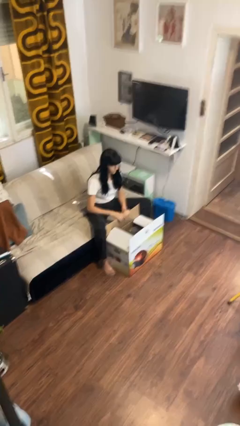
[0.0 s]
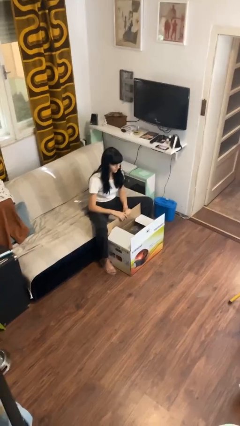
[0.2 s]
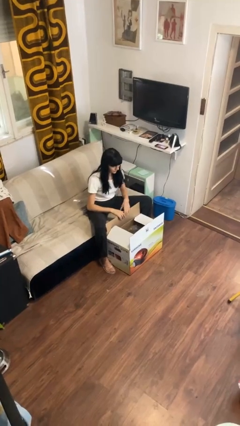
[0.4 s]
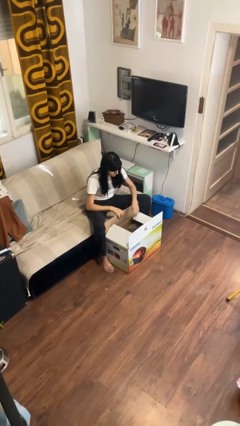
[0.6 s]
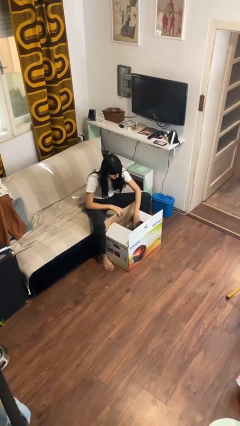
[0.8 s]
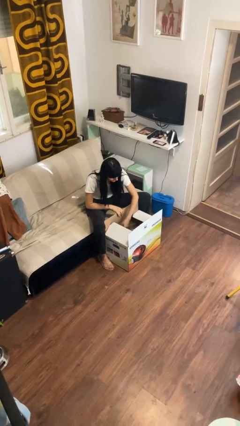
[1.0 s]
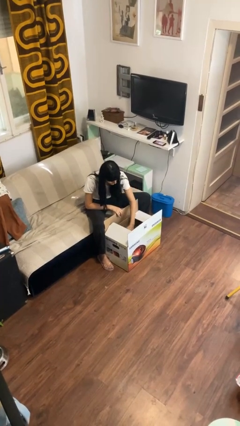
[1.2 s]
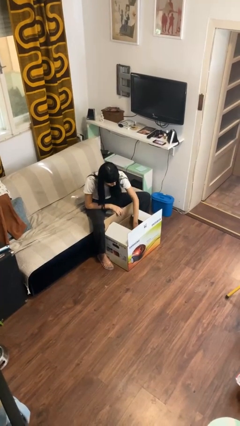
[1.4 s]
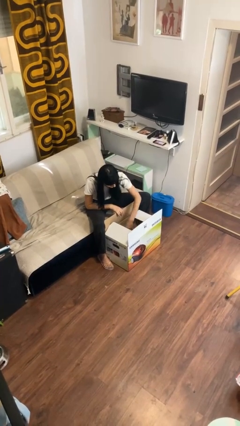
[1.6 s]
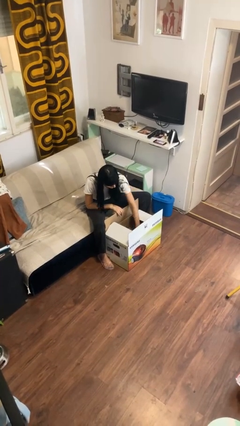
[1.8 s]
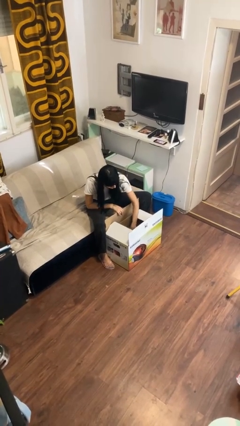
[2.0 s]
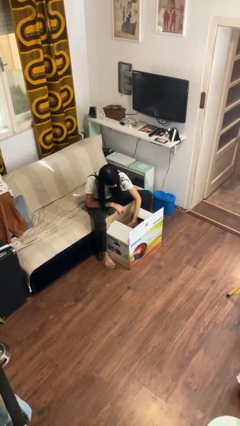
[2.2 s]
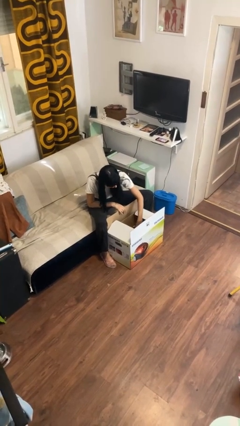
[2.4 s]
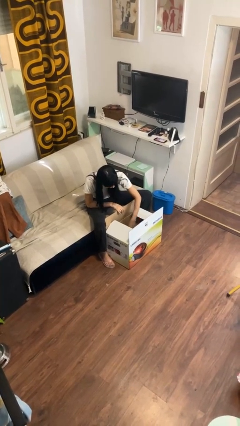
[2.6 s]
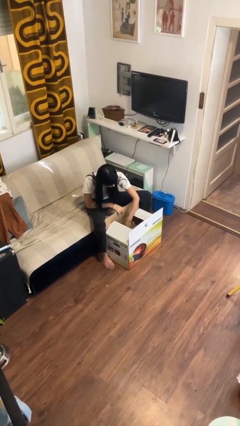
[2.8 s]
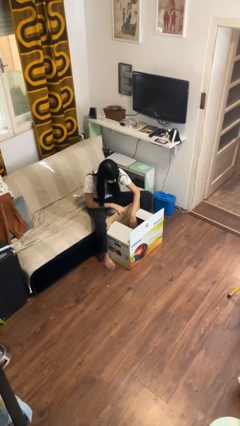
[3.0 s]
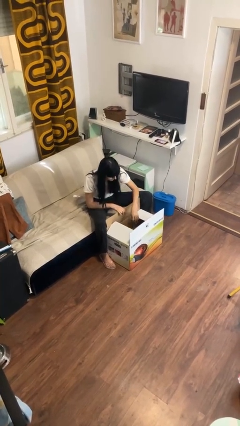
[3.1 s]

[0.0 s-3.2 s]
person searches in box

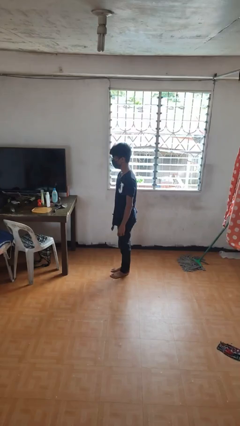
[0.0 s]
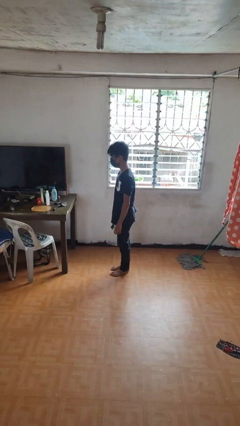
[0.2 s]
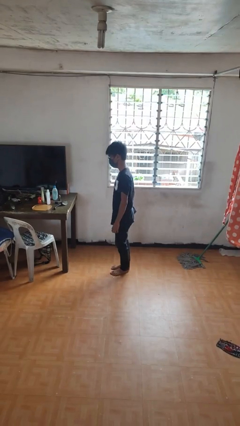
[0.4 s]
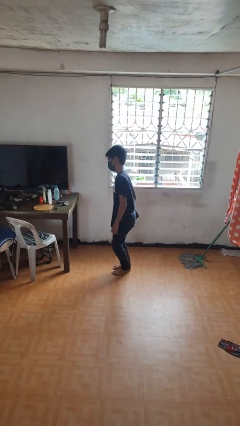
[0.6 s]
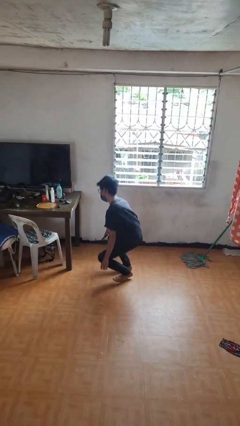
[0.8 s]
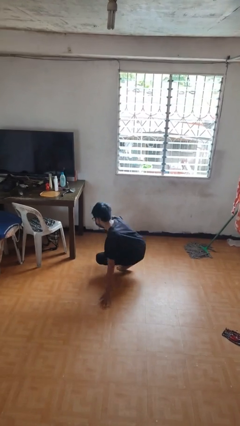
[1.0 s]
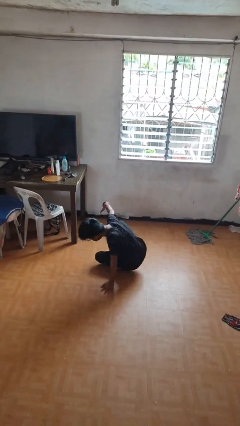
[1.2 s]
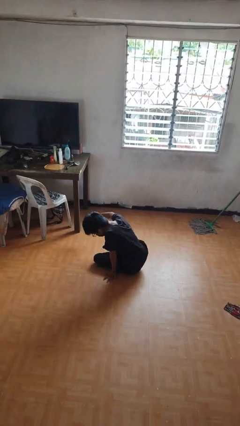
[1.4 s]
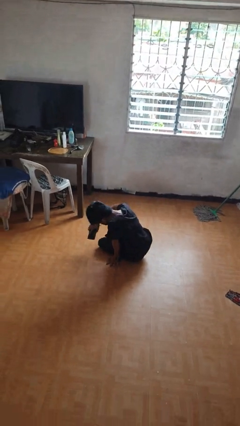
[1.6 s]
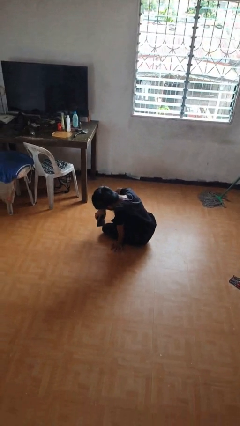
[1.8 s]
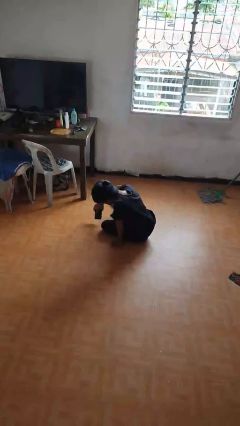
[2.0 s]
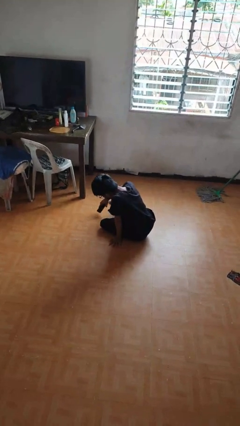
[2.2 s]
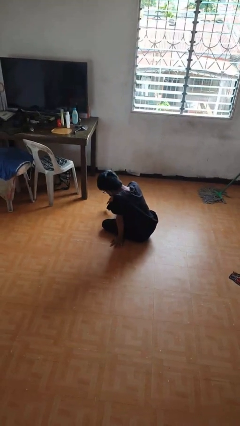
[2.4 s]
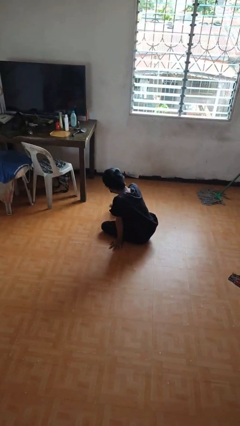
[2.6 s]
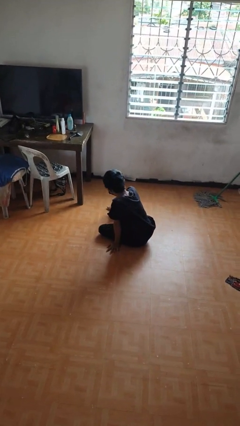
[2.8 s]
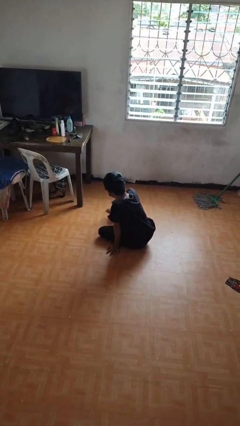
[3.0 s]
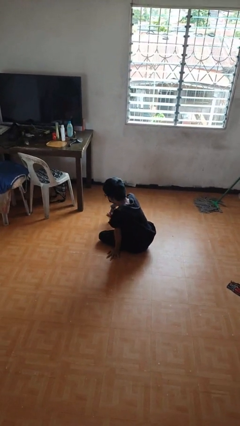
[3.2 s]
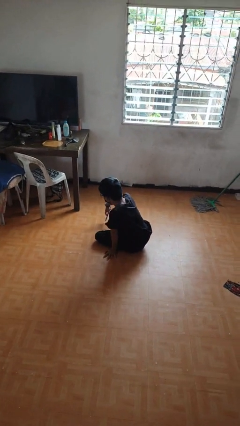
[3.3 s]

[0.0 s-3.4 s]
person falls while standing

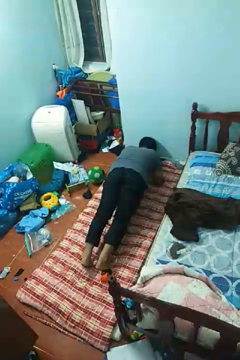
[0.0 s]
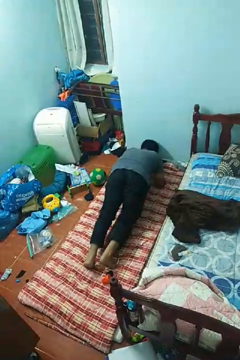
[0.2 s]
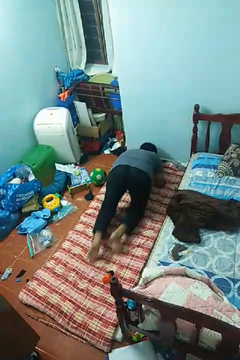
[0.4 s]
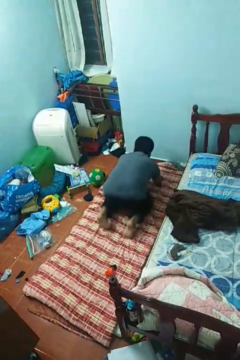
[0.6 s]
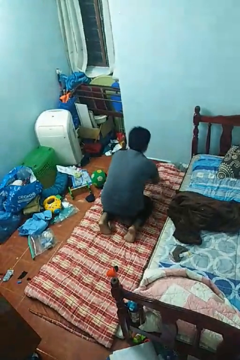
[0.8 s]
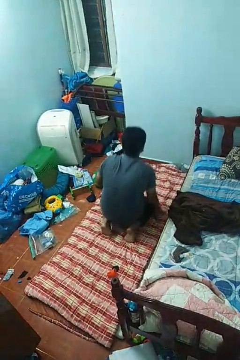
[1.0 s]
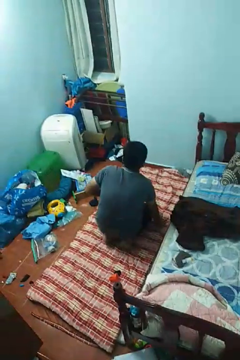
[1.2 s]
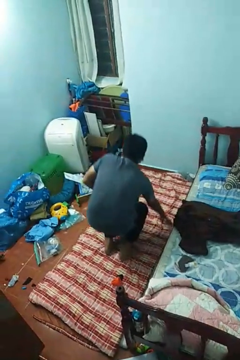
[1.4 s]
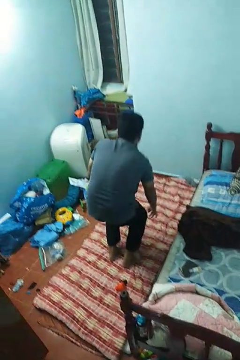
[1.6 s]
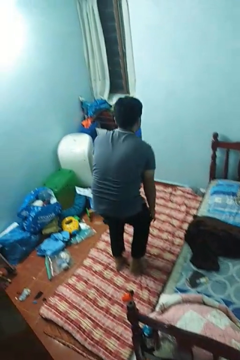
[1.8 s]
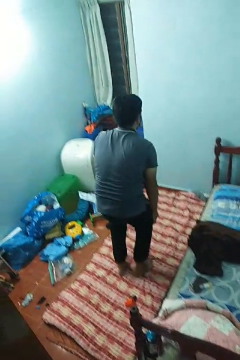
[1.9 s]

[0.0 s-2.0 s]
person stands up from floor

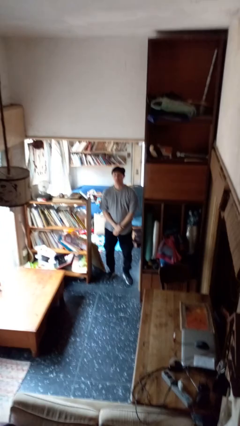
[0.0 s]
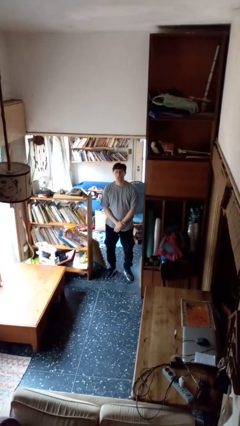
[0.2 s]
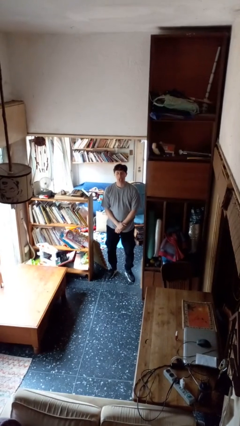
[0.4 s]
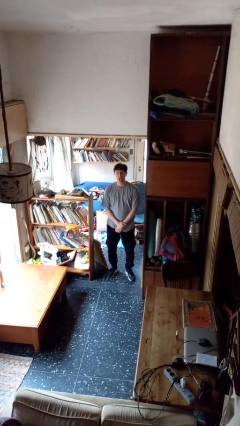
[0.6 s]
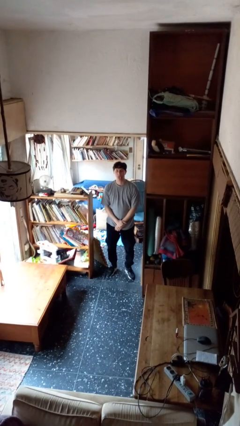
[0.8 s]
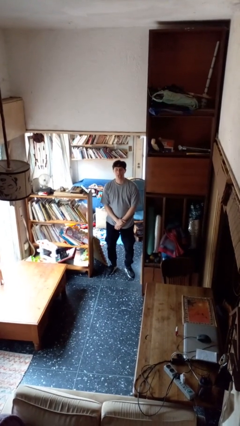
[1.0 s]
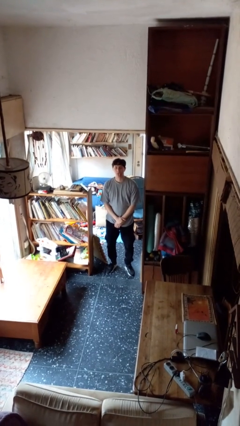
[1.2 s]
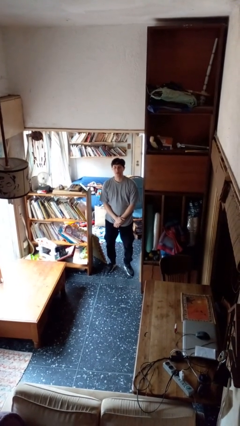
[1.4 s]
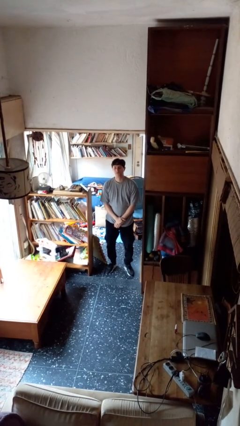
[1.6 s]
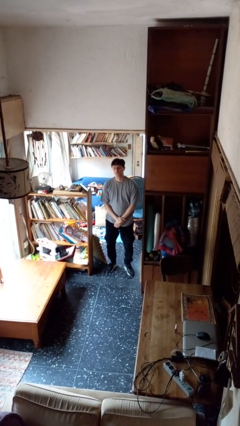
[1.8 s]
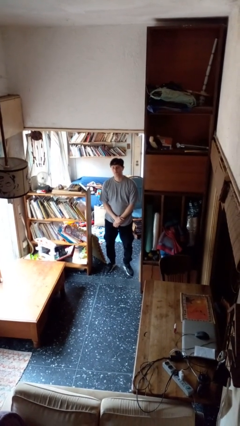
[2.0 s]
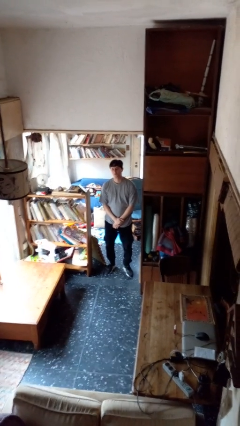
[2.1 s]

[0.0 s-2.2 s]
person sticks out tongue

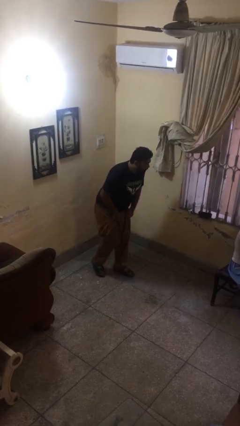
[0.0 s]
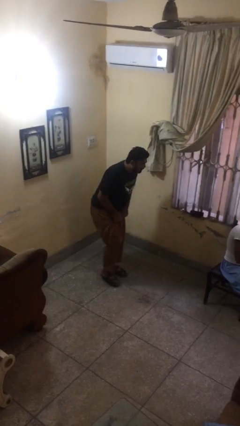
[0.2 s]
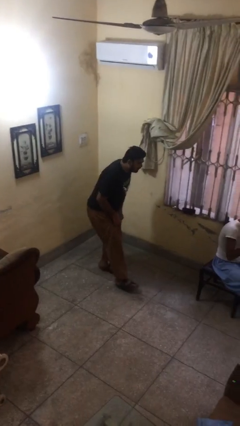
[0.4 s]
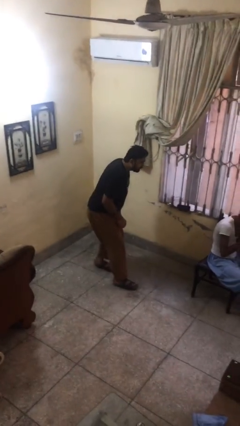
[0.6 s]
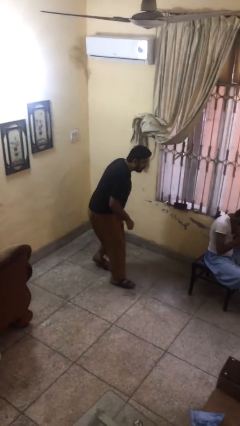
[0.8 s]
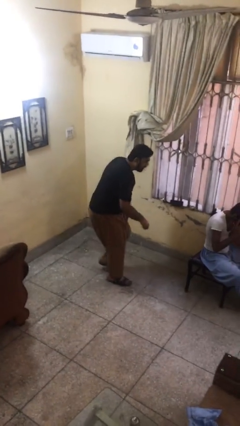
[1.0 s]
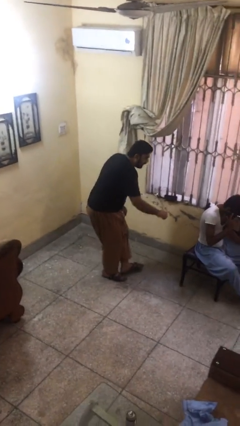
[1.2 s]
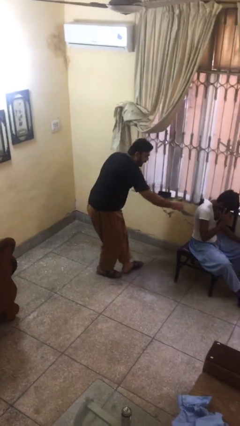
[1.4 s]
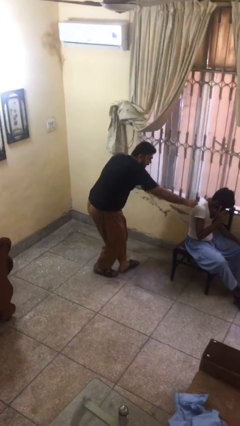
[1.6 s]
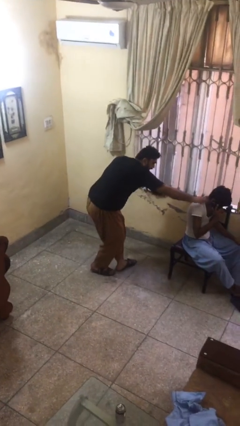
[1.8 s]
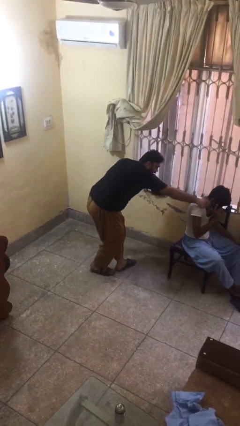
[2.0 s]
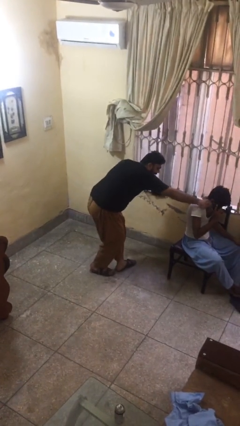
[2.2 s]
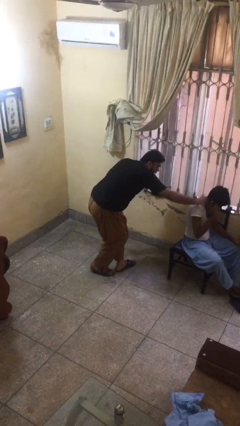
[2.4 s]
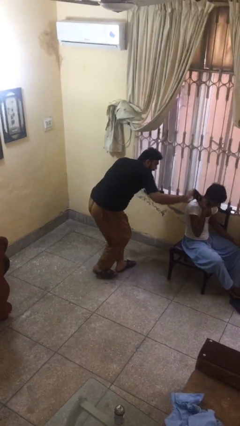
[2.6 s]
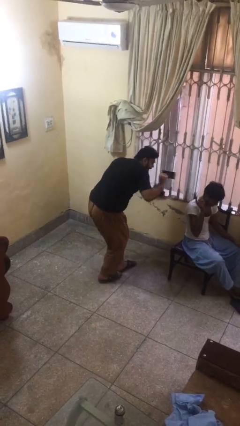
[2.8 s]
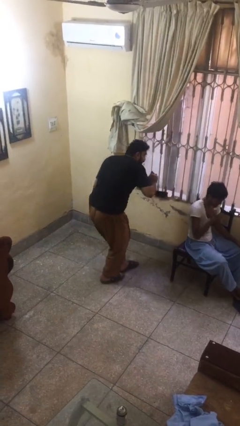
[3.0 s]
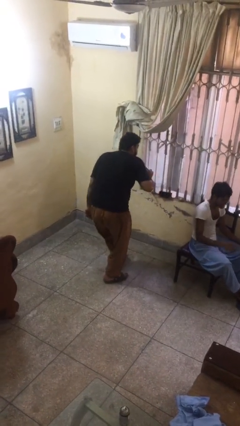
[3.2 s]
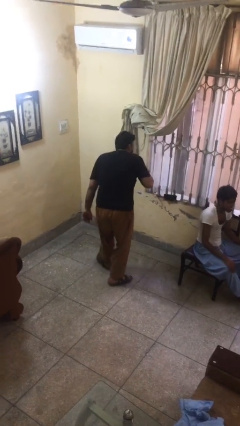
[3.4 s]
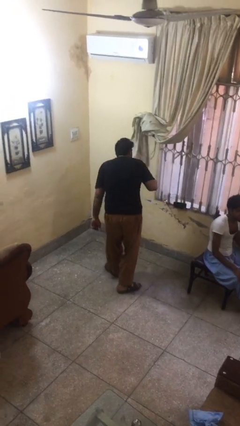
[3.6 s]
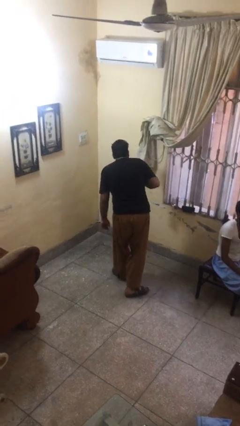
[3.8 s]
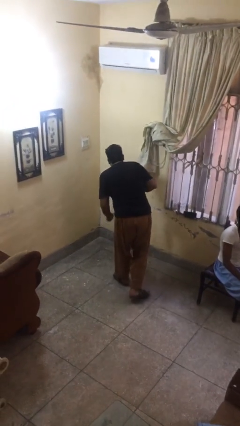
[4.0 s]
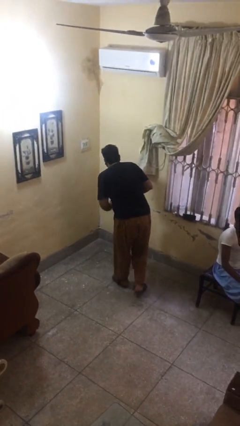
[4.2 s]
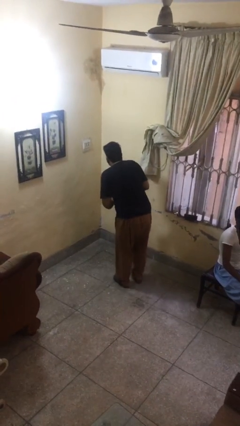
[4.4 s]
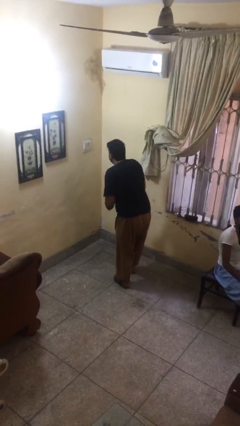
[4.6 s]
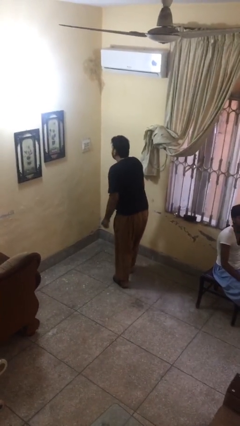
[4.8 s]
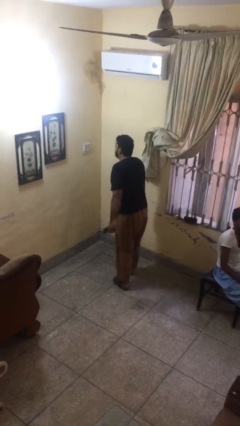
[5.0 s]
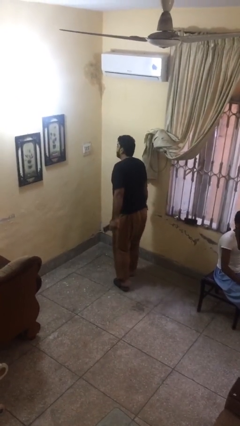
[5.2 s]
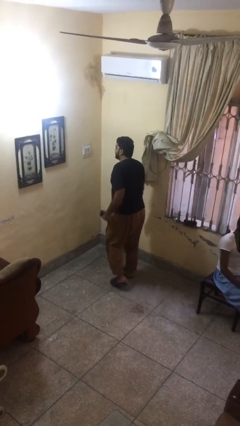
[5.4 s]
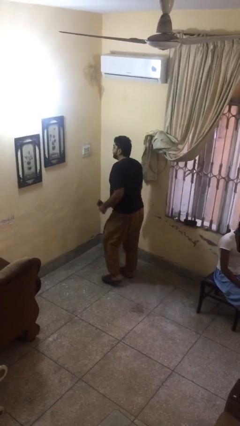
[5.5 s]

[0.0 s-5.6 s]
person steals object from person

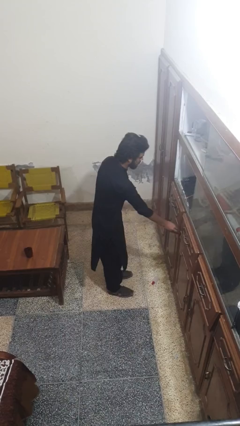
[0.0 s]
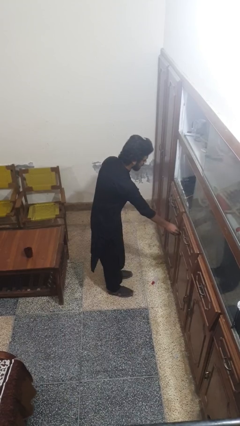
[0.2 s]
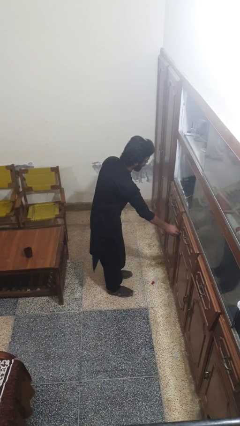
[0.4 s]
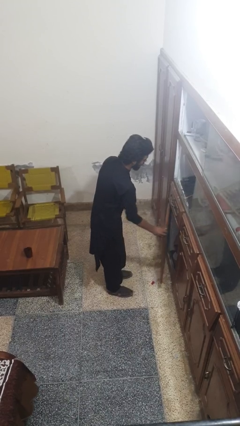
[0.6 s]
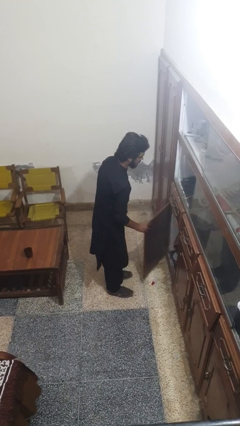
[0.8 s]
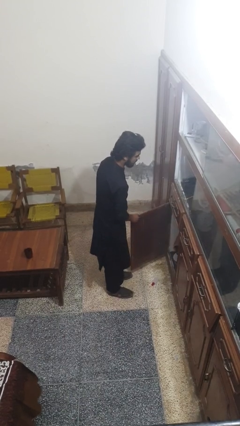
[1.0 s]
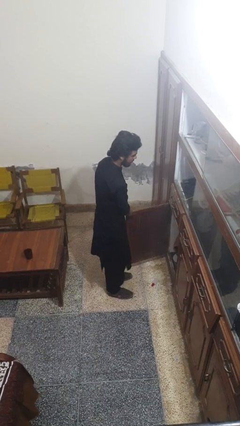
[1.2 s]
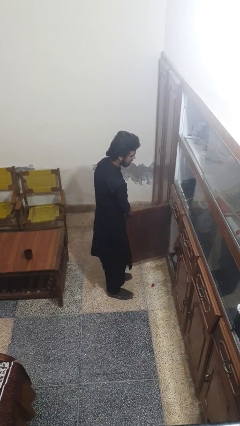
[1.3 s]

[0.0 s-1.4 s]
person opens cabinet

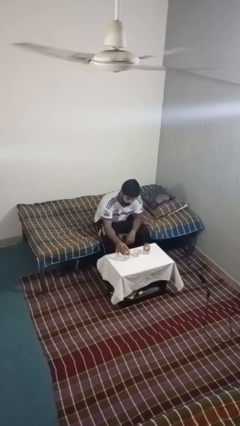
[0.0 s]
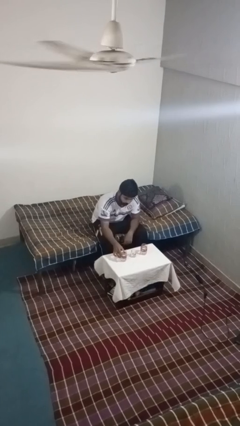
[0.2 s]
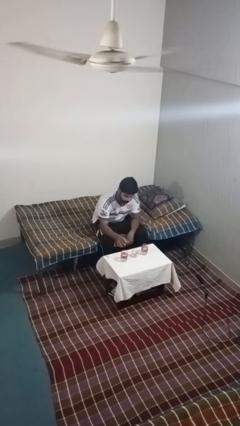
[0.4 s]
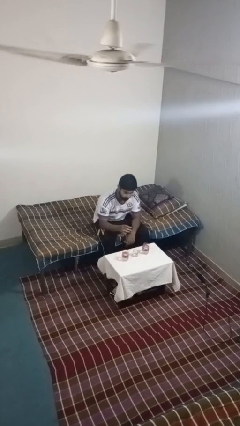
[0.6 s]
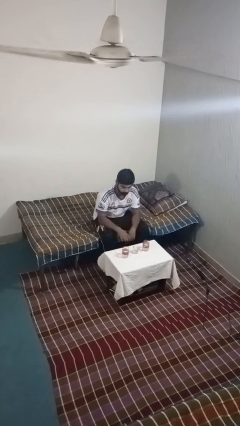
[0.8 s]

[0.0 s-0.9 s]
person puts down object on table
